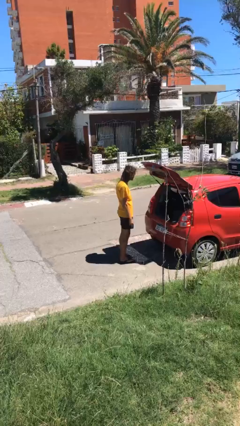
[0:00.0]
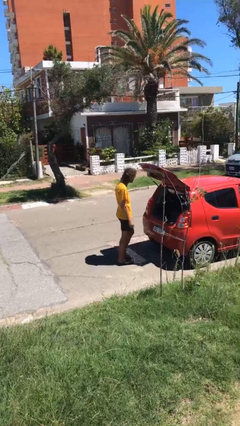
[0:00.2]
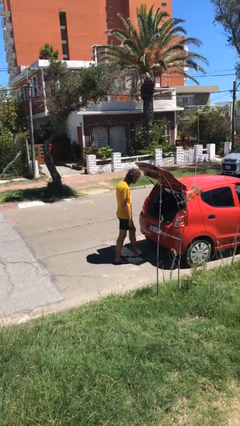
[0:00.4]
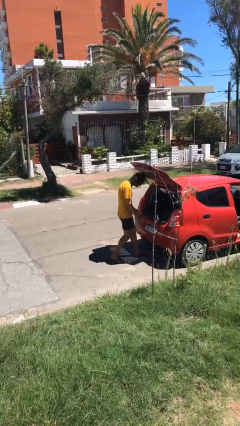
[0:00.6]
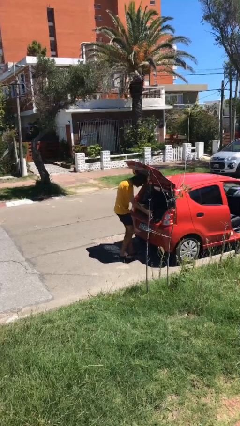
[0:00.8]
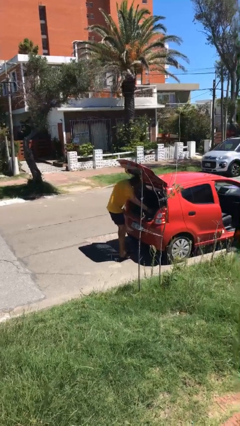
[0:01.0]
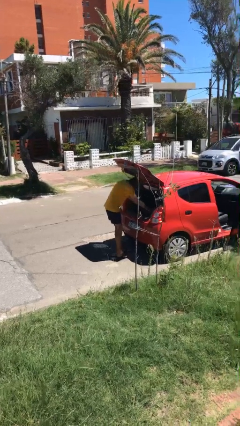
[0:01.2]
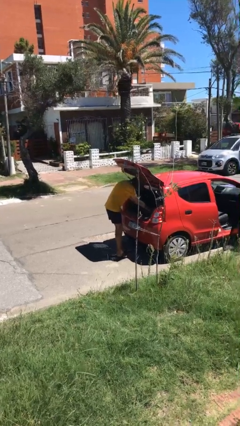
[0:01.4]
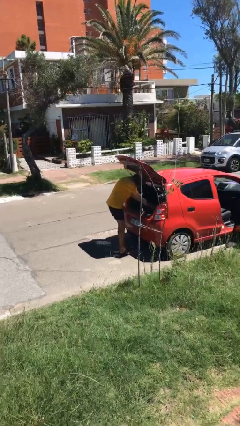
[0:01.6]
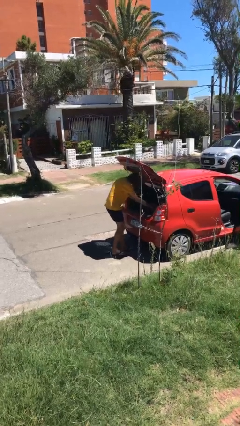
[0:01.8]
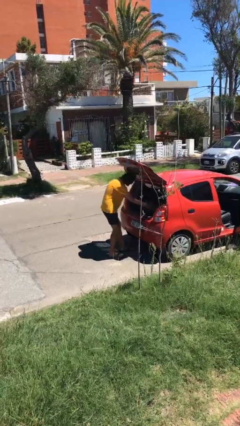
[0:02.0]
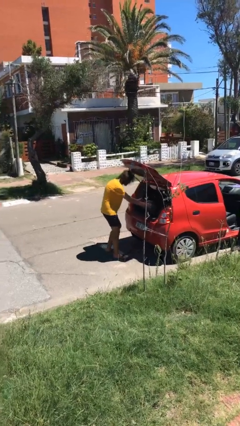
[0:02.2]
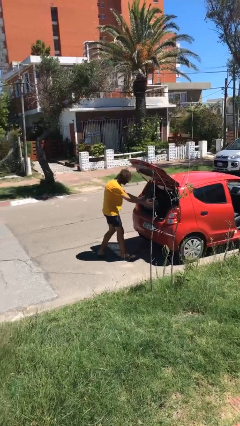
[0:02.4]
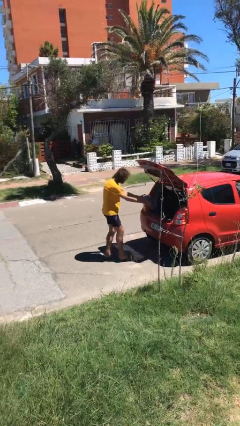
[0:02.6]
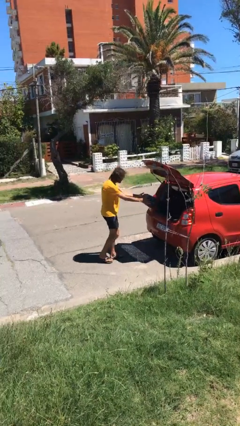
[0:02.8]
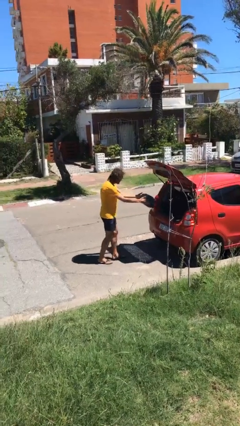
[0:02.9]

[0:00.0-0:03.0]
person unloads car

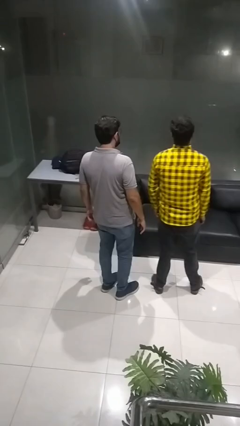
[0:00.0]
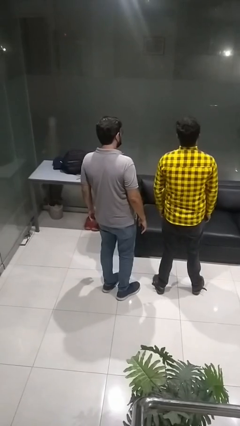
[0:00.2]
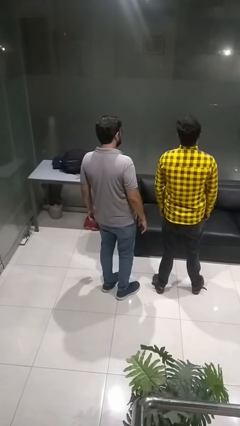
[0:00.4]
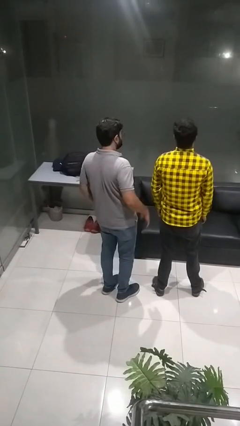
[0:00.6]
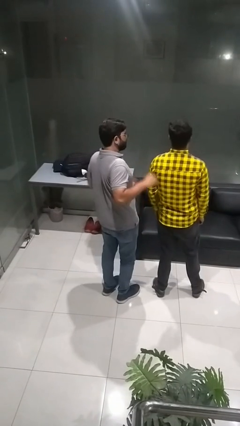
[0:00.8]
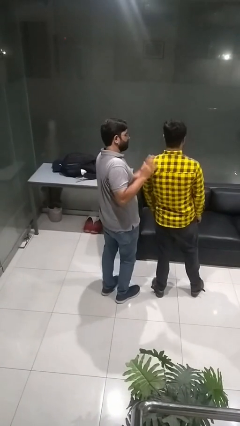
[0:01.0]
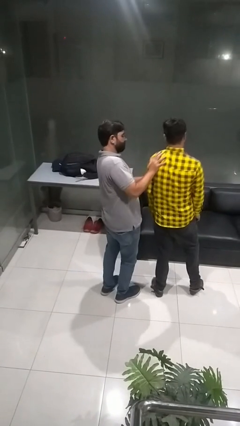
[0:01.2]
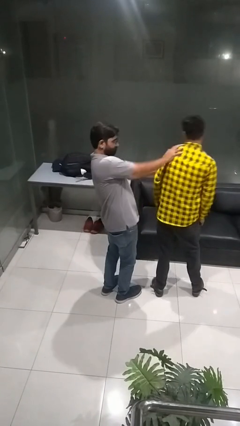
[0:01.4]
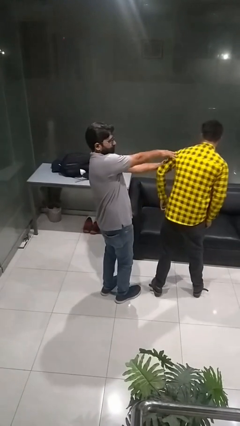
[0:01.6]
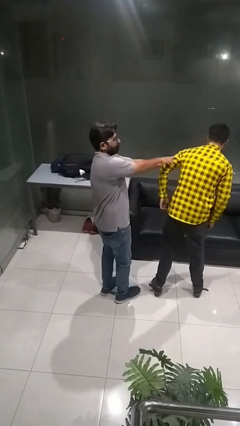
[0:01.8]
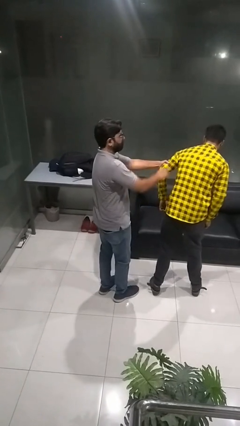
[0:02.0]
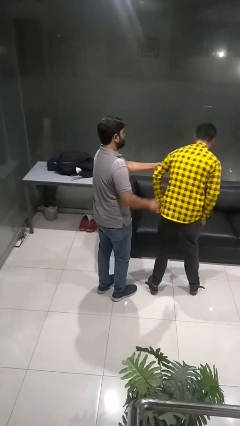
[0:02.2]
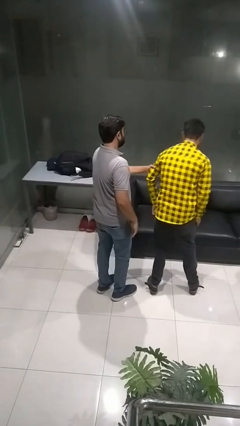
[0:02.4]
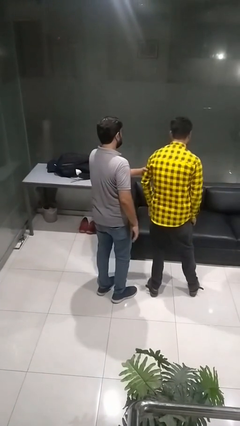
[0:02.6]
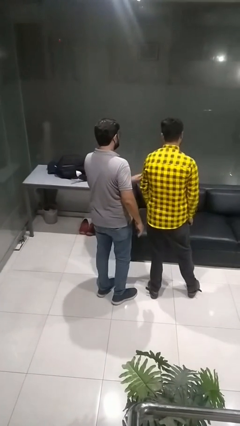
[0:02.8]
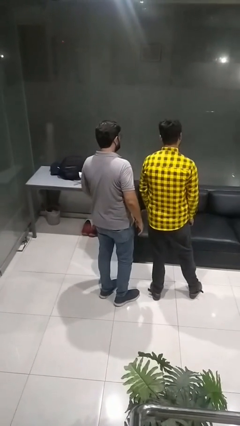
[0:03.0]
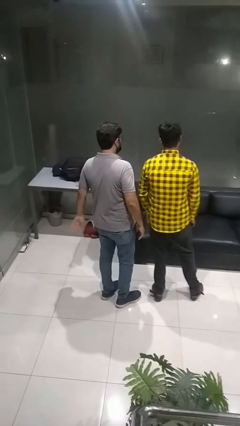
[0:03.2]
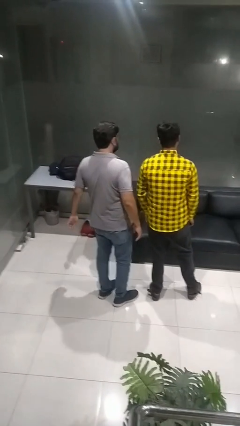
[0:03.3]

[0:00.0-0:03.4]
person shoves person

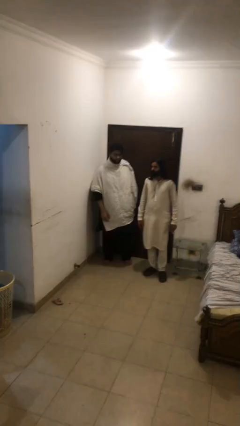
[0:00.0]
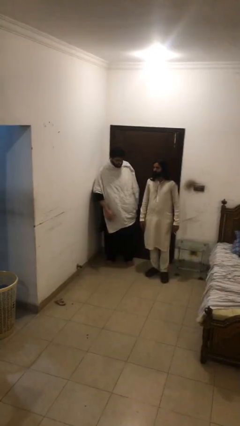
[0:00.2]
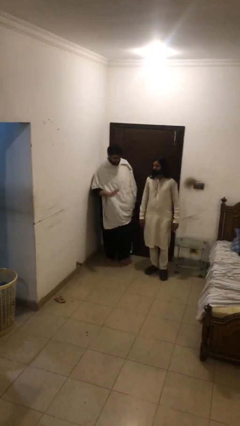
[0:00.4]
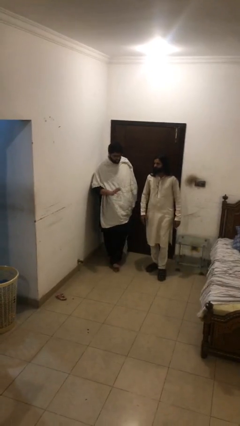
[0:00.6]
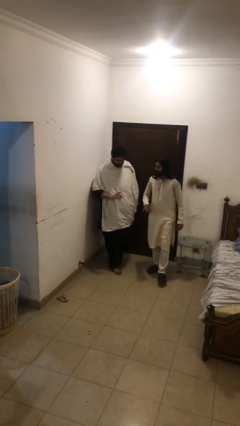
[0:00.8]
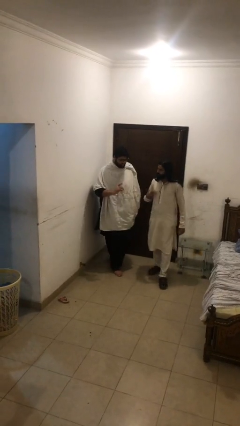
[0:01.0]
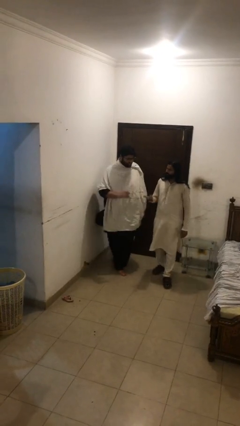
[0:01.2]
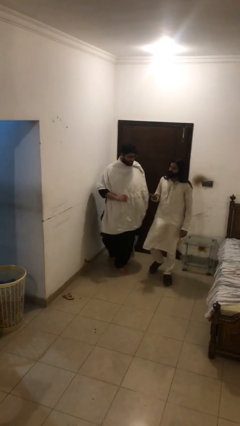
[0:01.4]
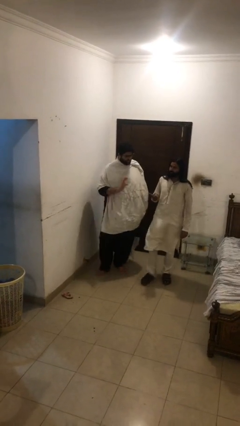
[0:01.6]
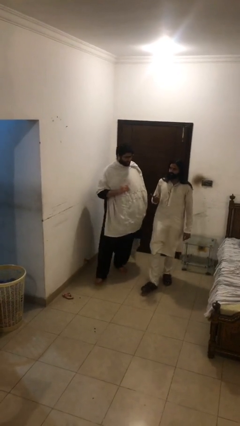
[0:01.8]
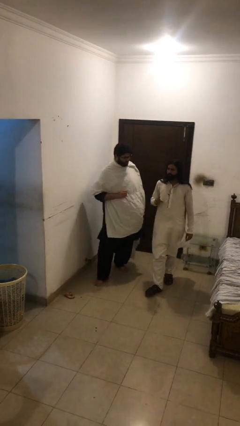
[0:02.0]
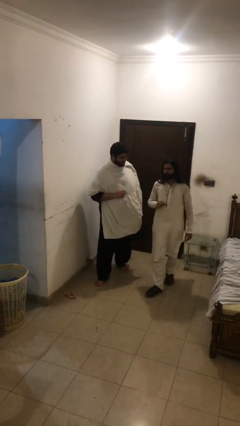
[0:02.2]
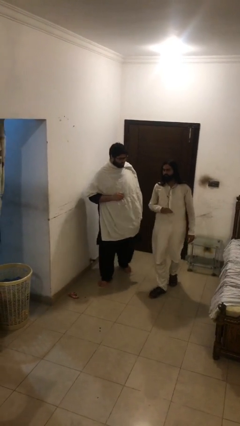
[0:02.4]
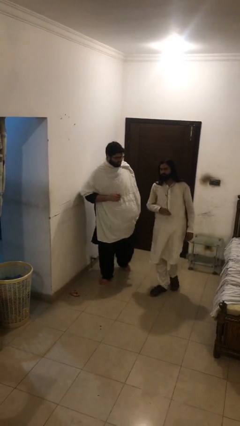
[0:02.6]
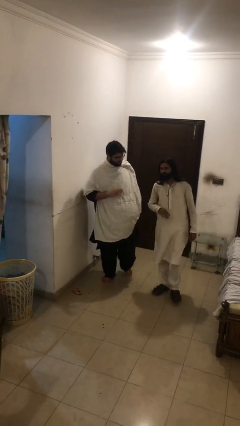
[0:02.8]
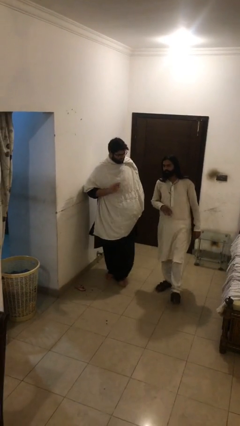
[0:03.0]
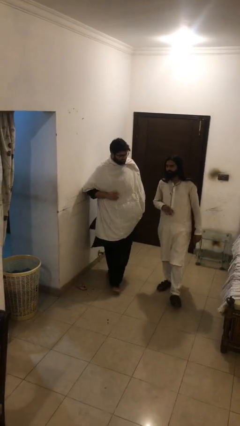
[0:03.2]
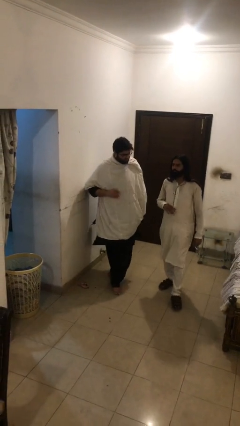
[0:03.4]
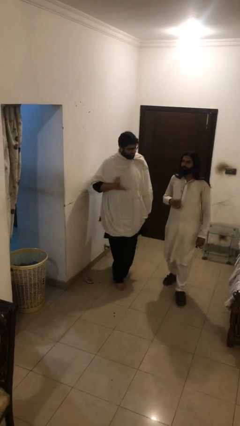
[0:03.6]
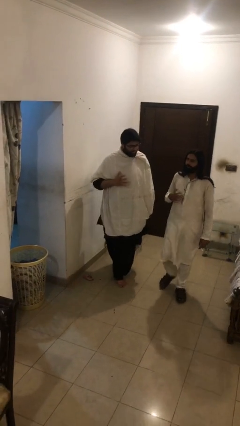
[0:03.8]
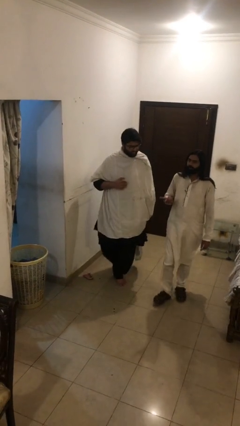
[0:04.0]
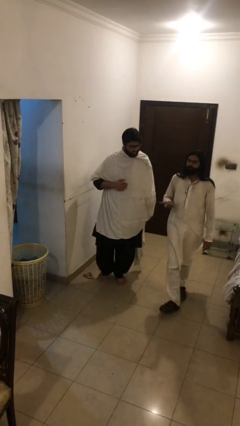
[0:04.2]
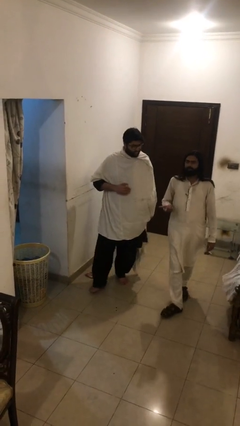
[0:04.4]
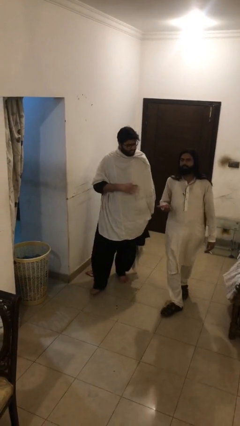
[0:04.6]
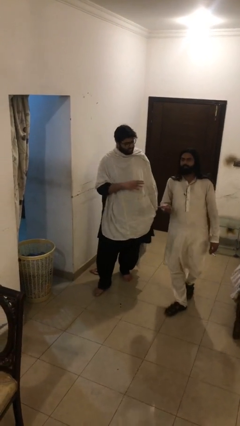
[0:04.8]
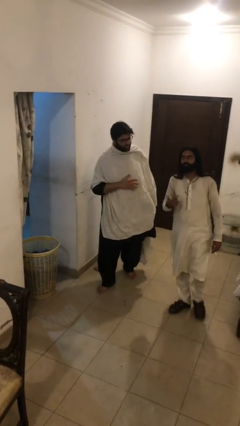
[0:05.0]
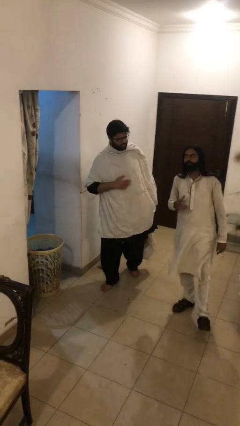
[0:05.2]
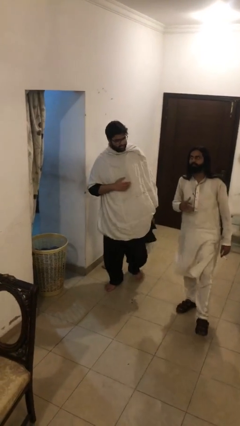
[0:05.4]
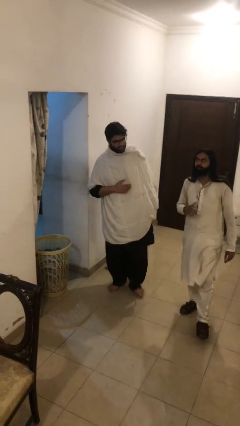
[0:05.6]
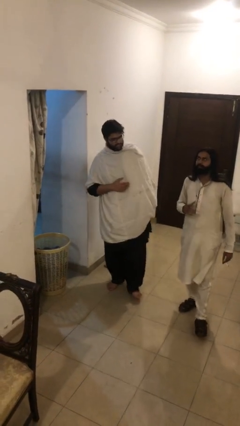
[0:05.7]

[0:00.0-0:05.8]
person talks to person

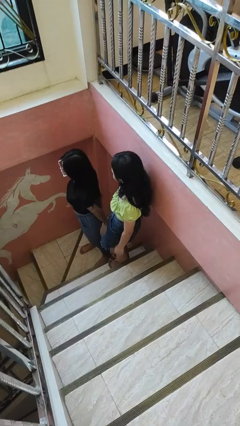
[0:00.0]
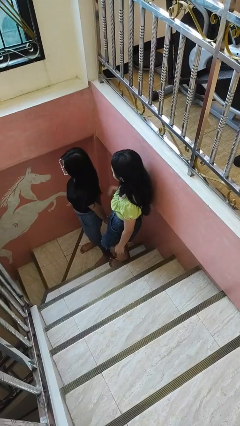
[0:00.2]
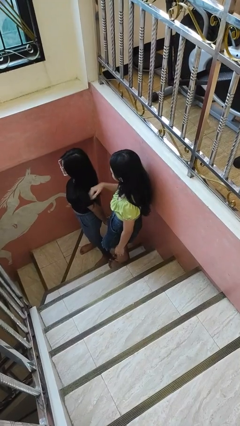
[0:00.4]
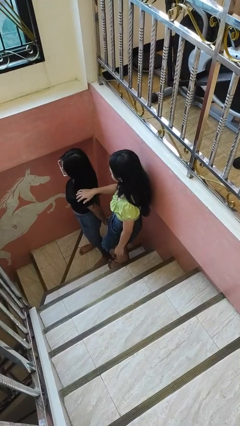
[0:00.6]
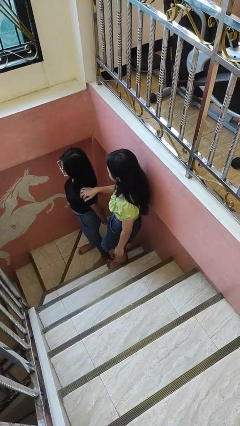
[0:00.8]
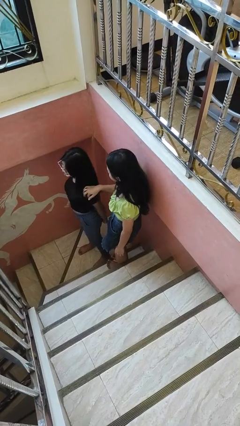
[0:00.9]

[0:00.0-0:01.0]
person grabs person by shoulder

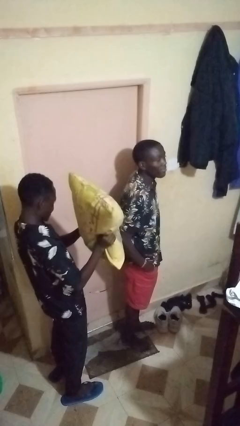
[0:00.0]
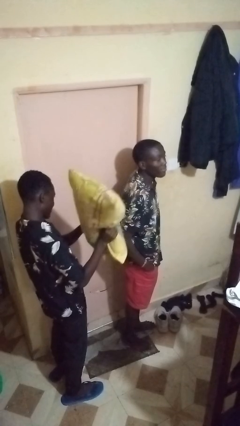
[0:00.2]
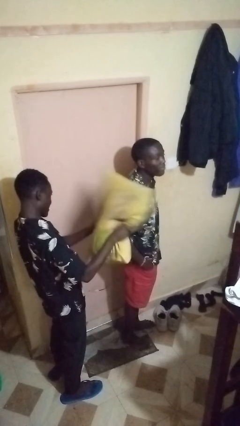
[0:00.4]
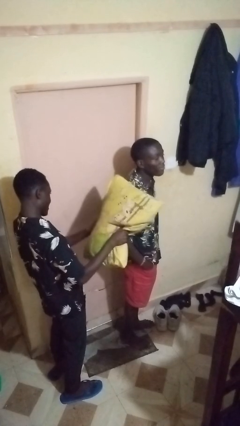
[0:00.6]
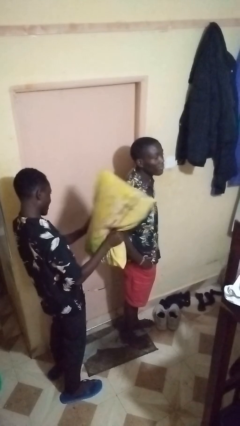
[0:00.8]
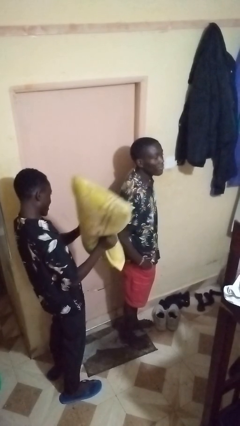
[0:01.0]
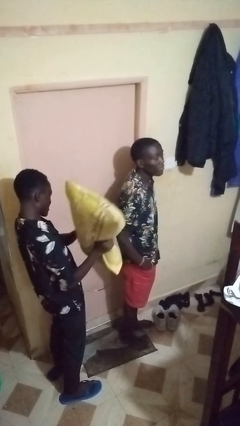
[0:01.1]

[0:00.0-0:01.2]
person hits person with pillow

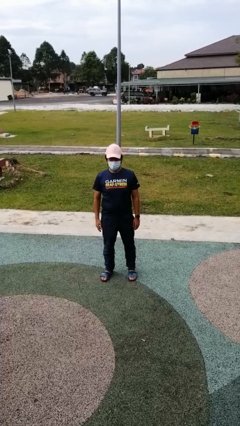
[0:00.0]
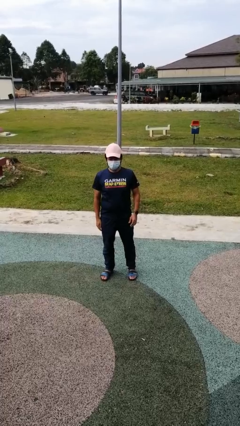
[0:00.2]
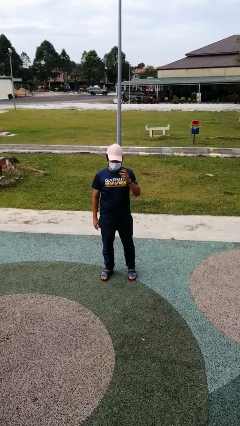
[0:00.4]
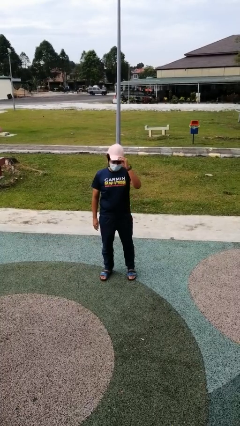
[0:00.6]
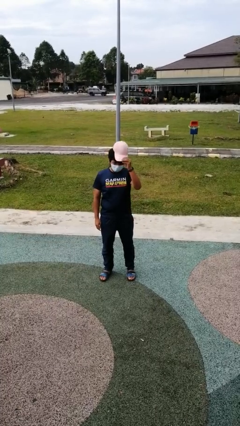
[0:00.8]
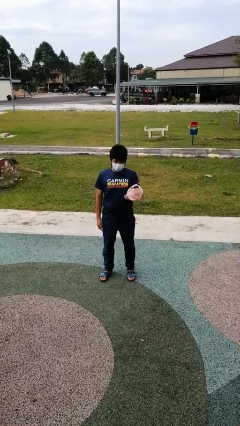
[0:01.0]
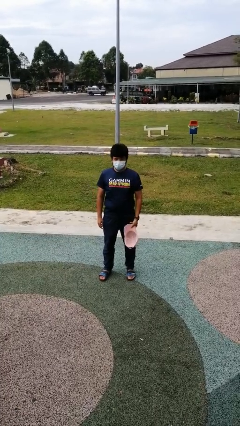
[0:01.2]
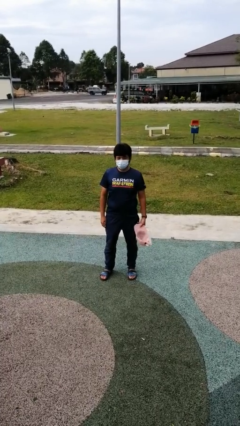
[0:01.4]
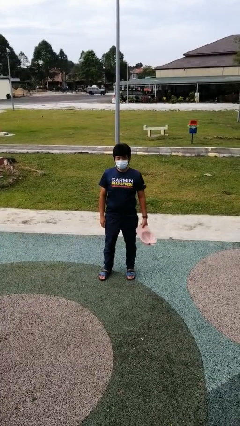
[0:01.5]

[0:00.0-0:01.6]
person takes off hat

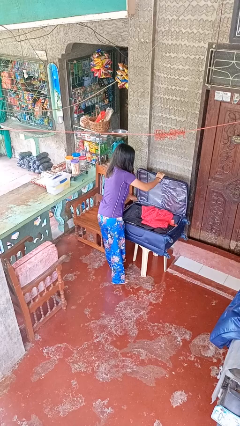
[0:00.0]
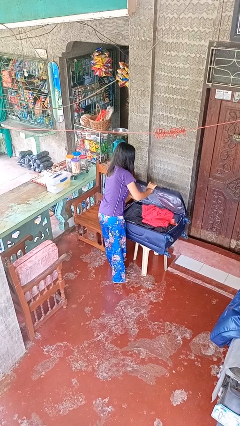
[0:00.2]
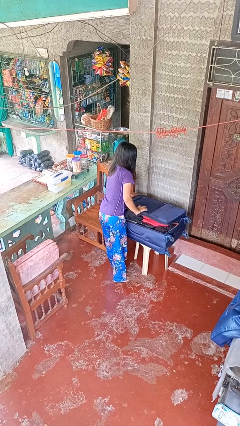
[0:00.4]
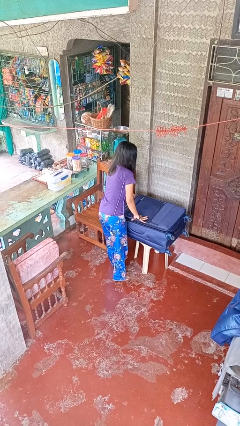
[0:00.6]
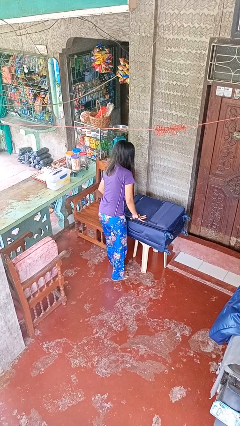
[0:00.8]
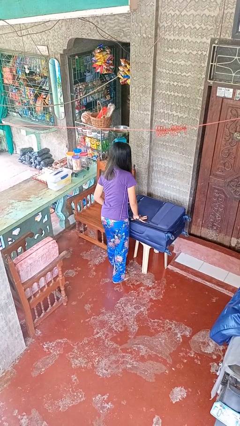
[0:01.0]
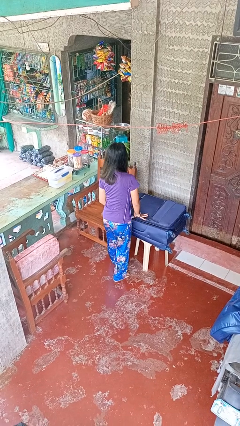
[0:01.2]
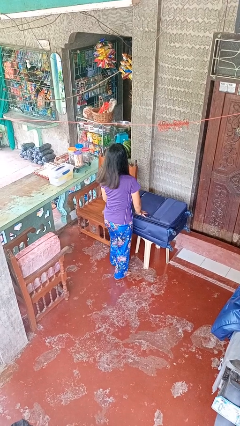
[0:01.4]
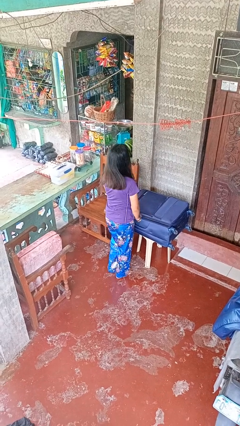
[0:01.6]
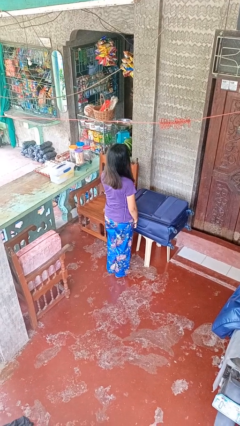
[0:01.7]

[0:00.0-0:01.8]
person closes suitcase
